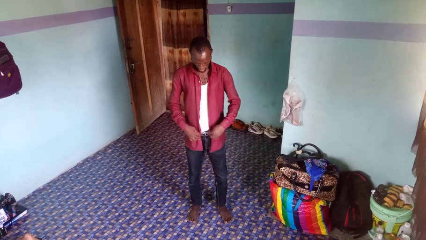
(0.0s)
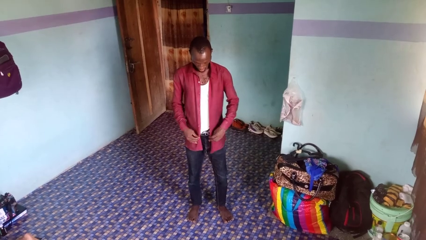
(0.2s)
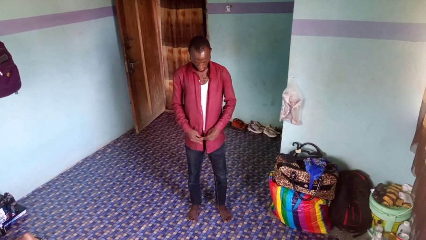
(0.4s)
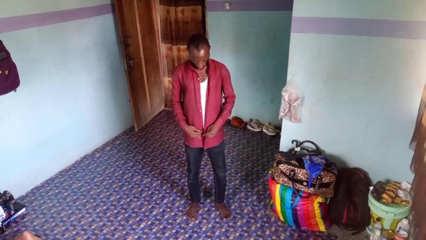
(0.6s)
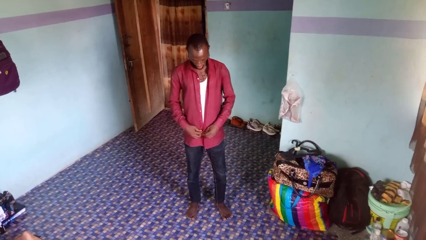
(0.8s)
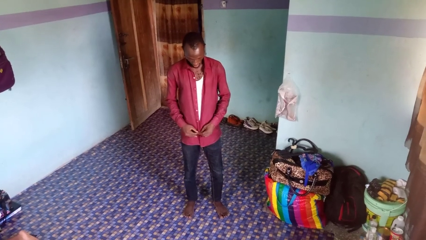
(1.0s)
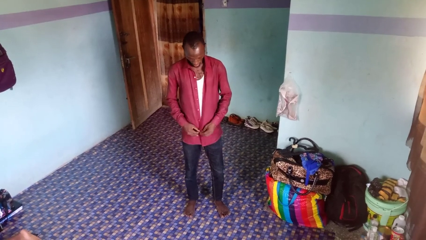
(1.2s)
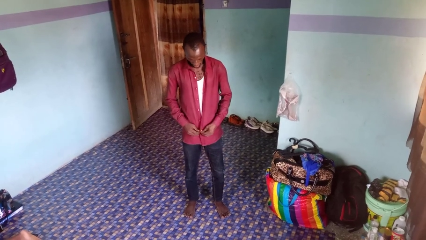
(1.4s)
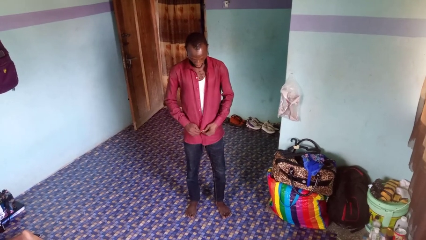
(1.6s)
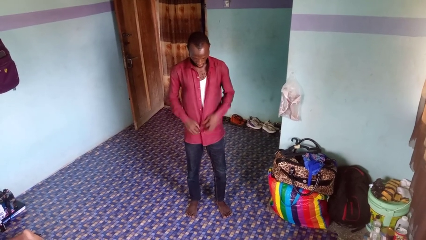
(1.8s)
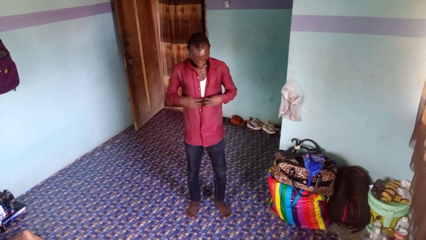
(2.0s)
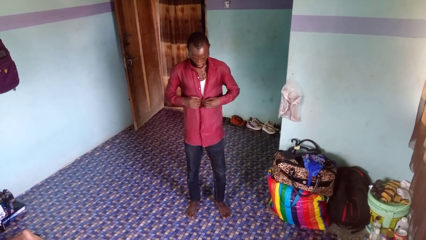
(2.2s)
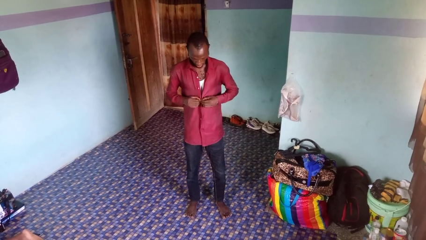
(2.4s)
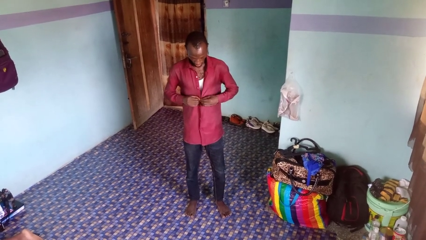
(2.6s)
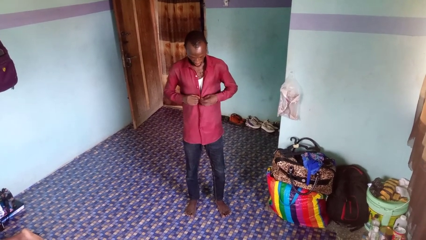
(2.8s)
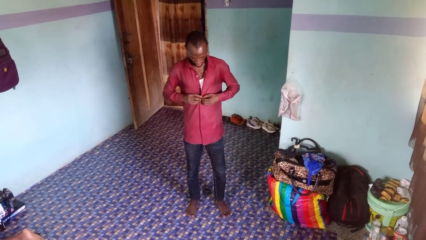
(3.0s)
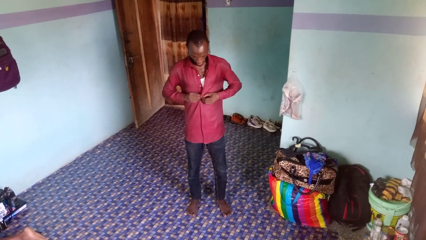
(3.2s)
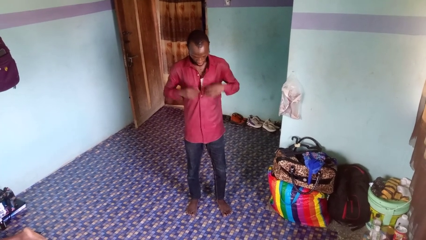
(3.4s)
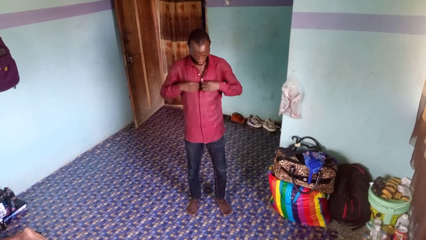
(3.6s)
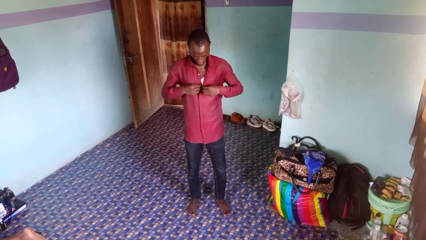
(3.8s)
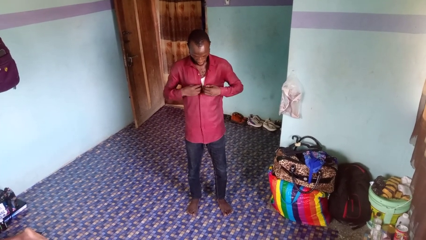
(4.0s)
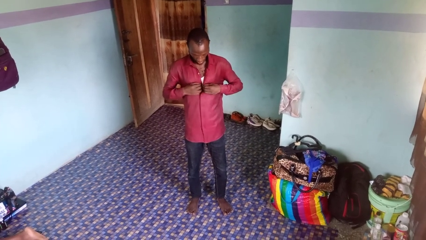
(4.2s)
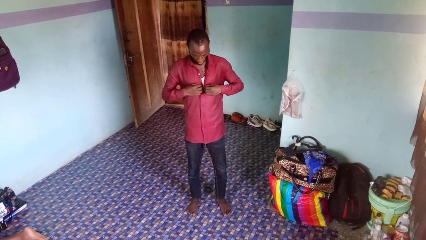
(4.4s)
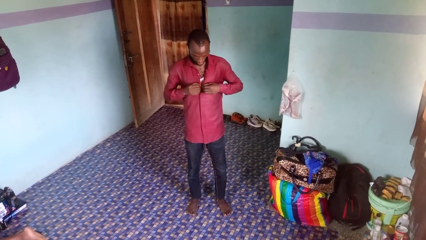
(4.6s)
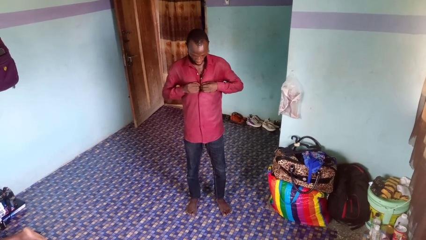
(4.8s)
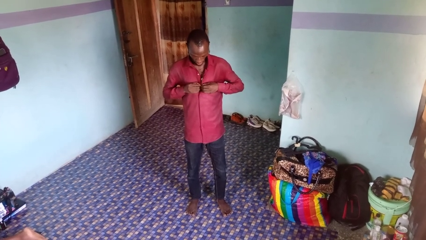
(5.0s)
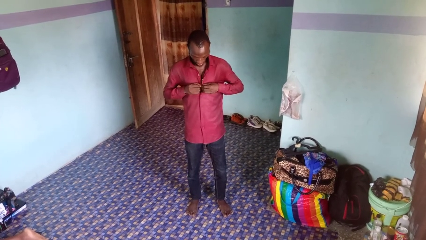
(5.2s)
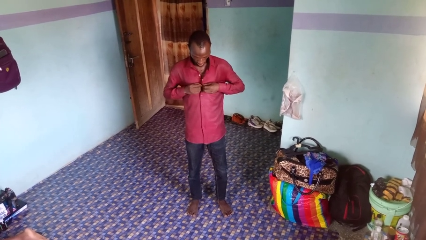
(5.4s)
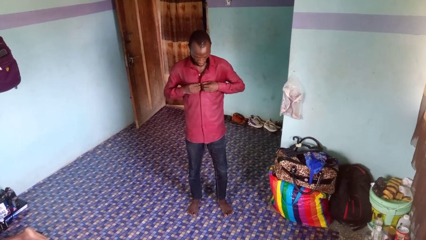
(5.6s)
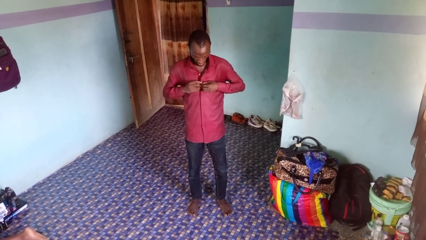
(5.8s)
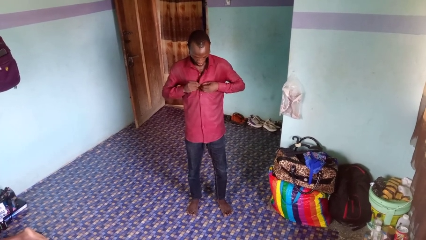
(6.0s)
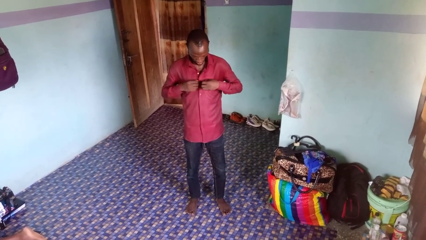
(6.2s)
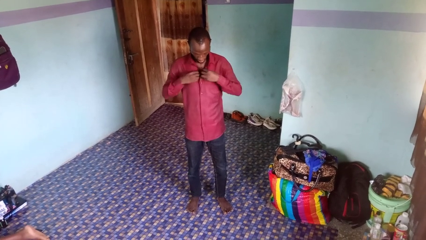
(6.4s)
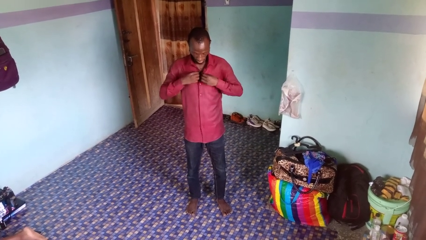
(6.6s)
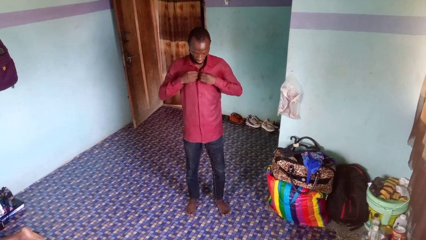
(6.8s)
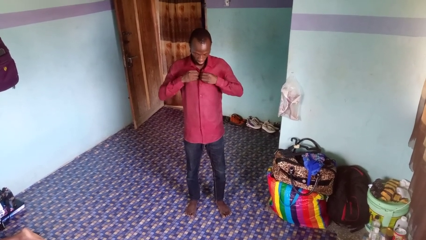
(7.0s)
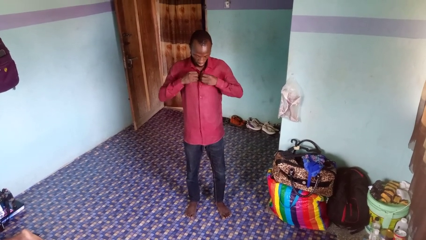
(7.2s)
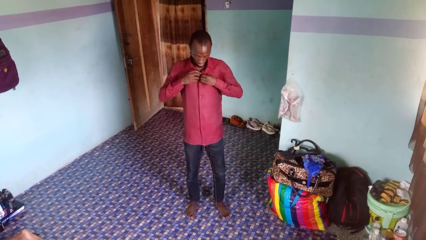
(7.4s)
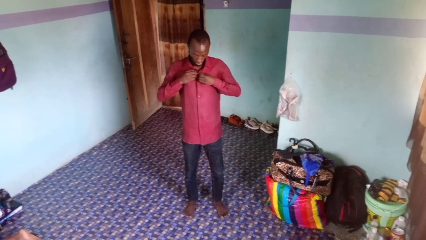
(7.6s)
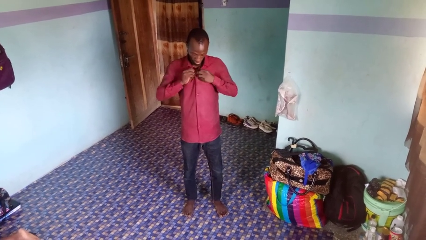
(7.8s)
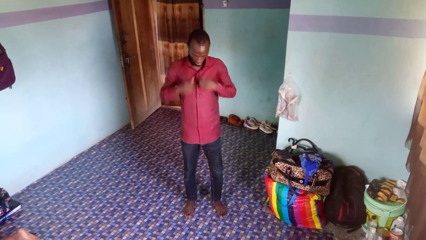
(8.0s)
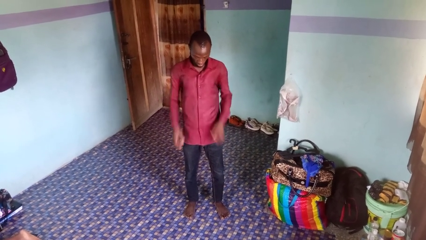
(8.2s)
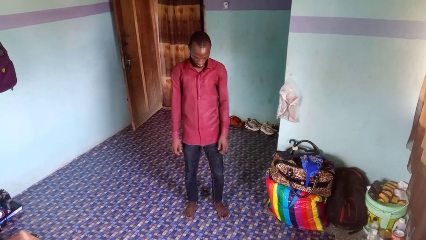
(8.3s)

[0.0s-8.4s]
person buttons shirt

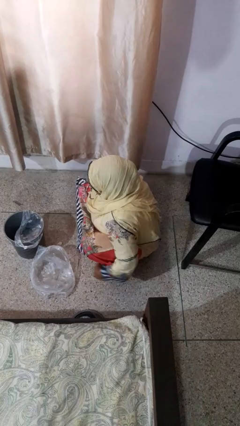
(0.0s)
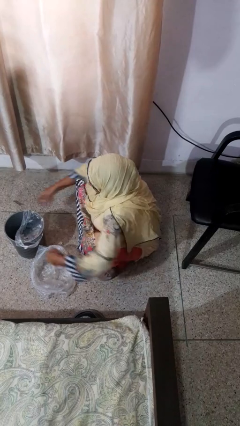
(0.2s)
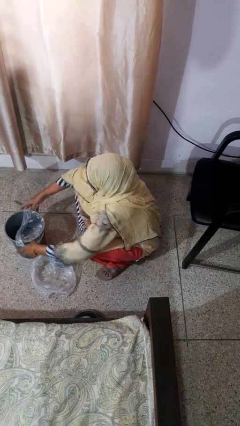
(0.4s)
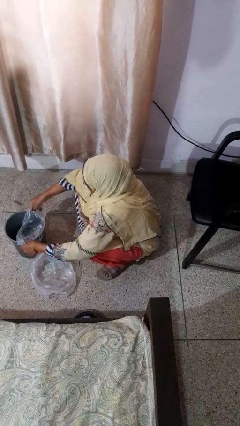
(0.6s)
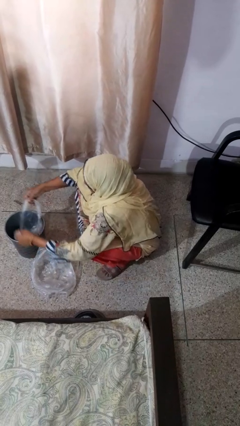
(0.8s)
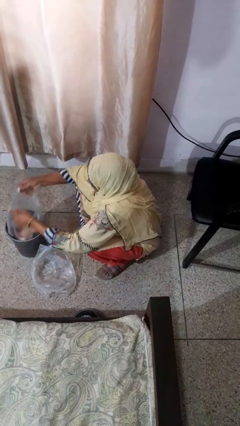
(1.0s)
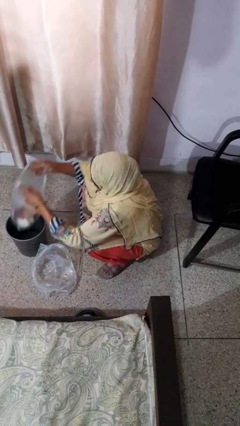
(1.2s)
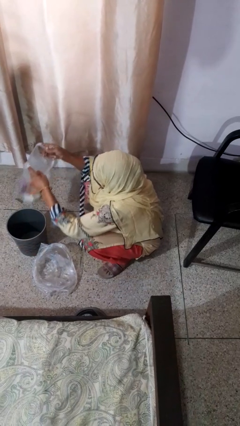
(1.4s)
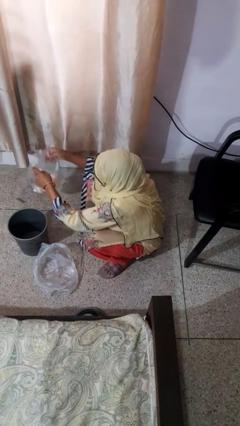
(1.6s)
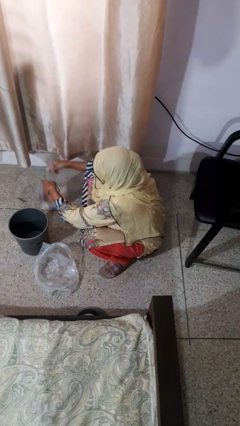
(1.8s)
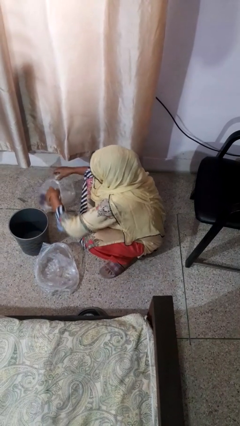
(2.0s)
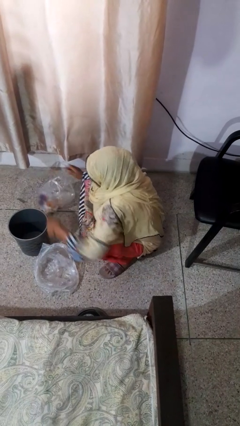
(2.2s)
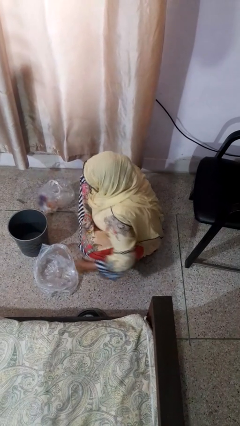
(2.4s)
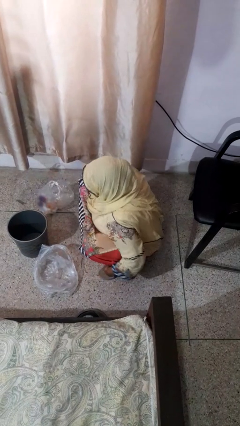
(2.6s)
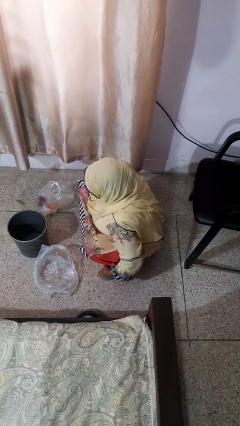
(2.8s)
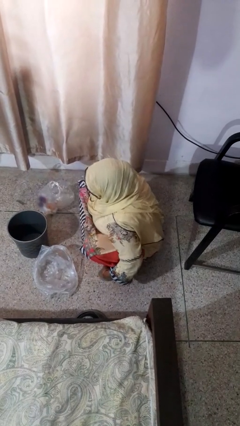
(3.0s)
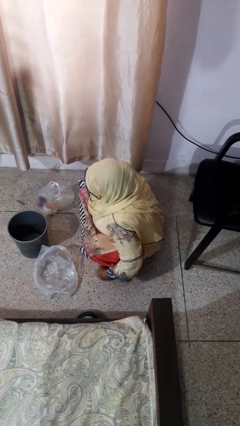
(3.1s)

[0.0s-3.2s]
person removes trashbag from trashcan

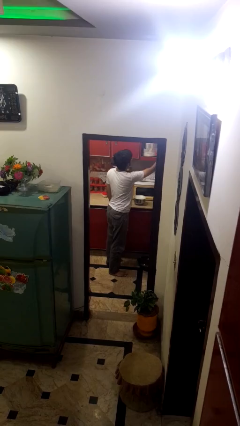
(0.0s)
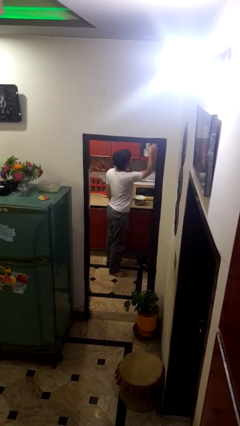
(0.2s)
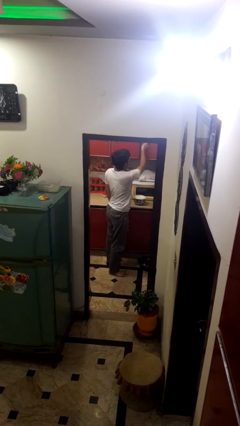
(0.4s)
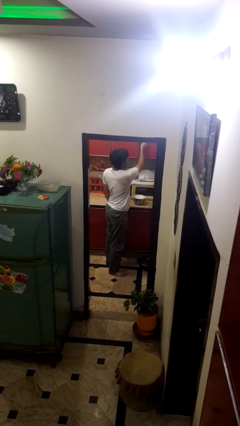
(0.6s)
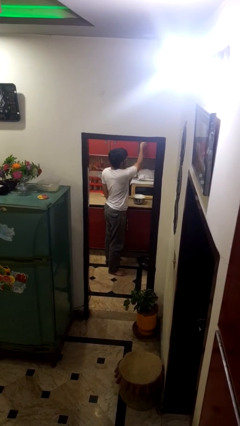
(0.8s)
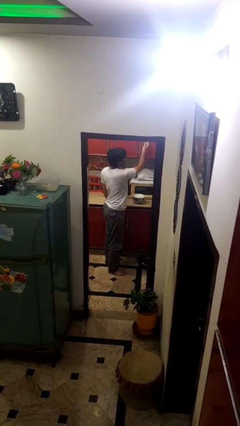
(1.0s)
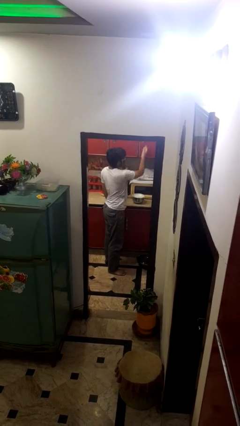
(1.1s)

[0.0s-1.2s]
person closes cabinet

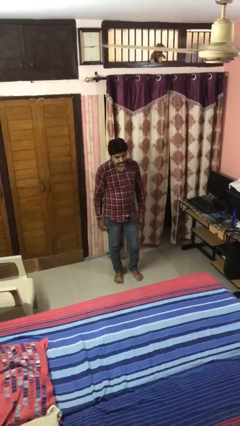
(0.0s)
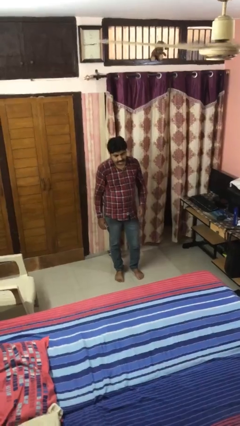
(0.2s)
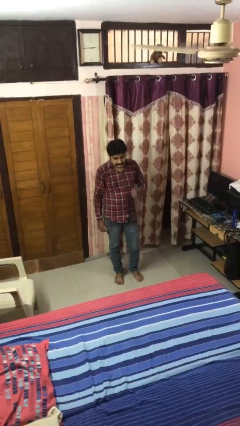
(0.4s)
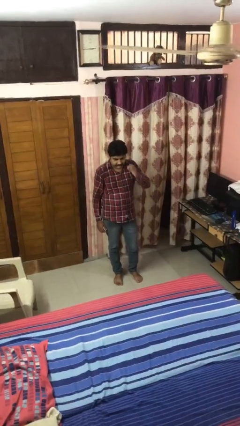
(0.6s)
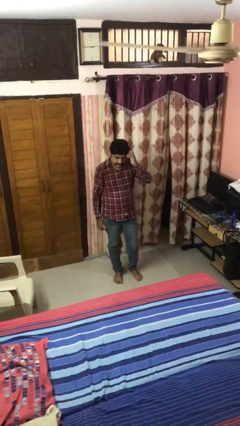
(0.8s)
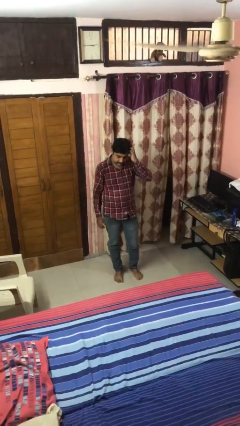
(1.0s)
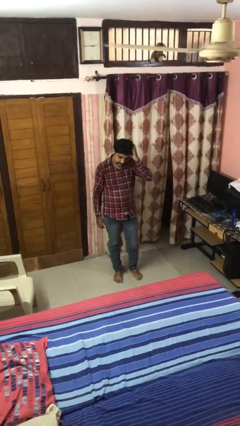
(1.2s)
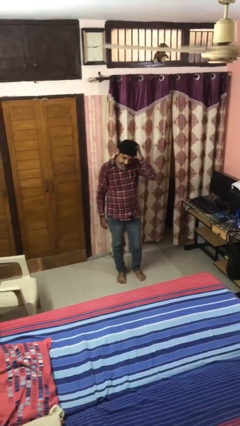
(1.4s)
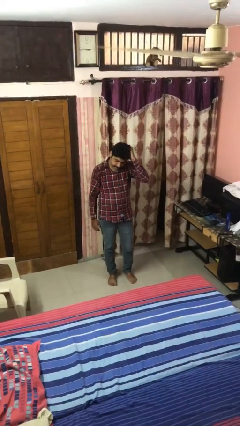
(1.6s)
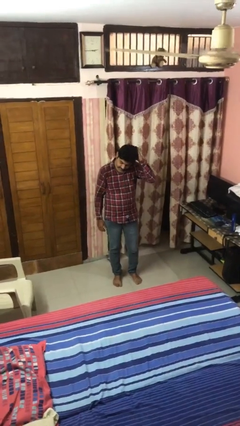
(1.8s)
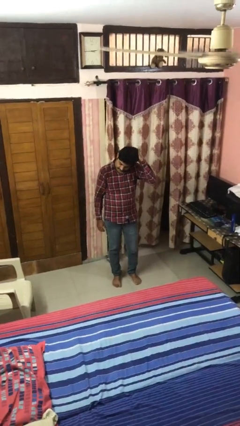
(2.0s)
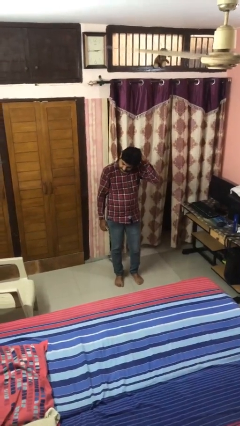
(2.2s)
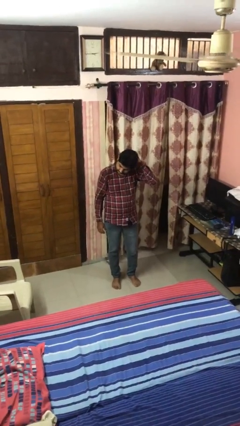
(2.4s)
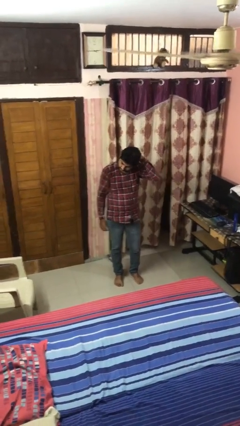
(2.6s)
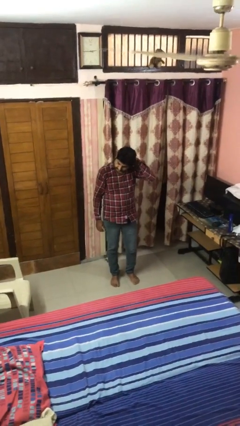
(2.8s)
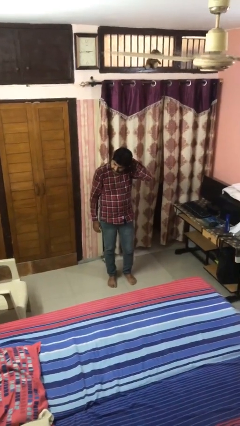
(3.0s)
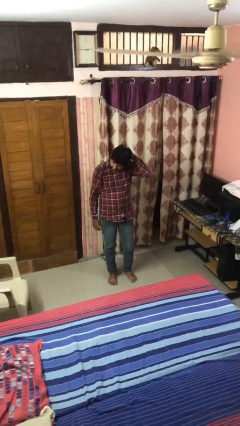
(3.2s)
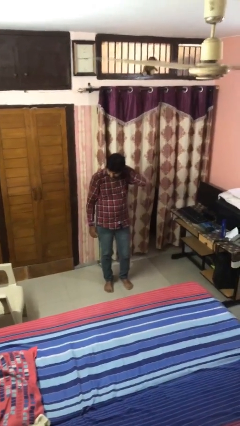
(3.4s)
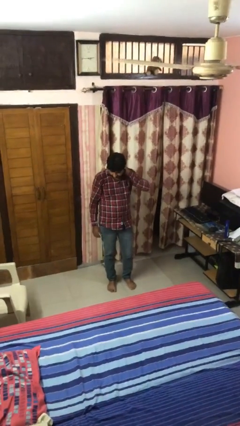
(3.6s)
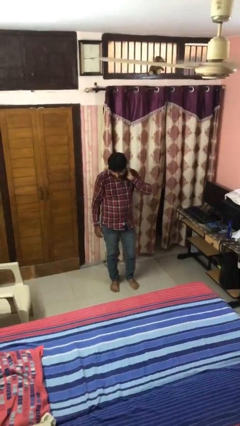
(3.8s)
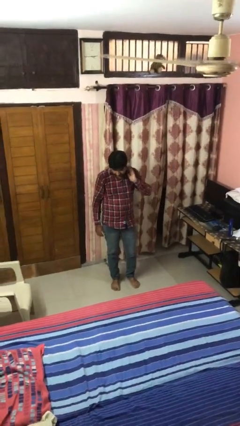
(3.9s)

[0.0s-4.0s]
person scratches face

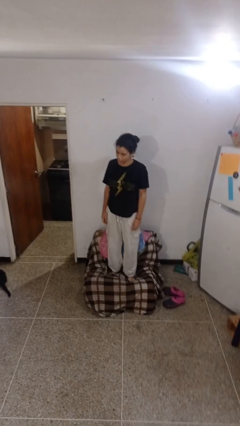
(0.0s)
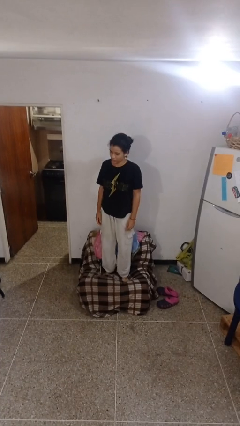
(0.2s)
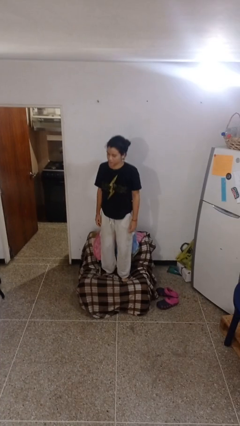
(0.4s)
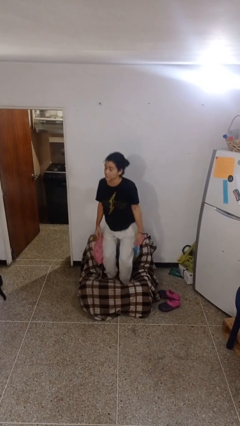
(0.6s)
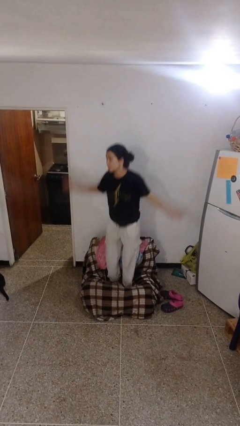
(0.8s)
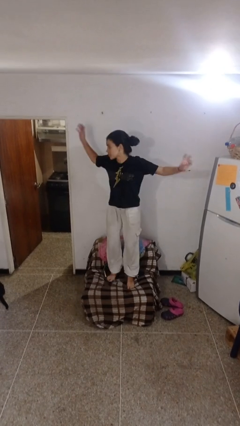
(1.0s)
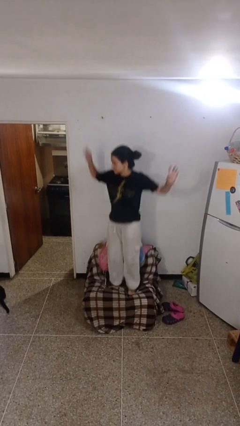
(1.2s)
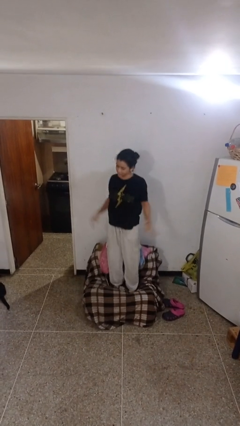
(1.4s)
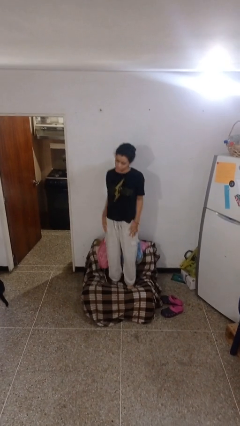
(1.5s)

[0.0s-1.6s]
person jumps on couch
